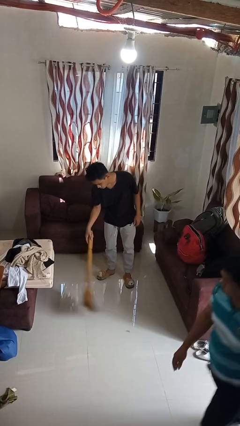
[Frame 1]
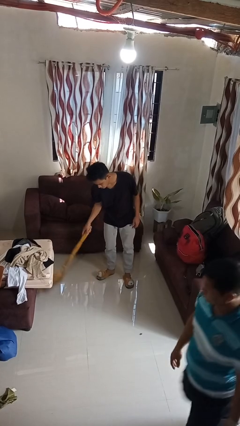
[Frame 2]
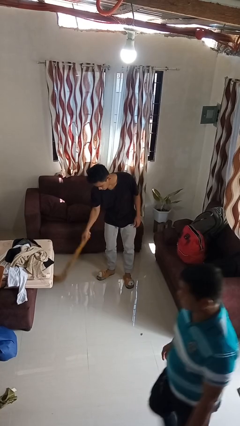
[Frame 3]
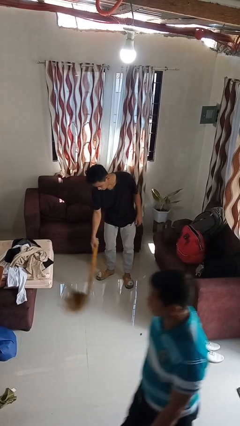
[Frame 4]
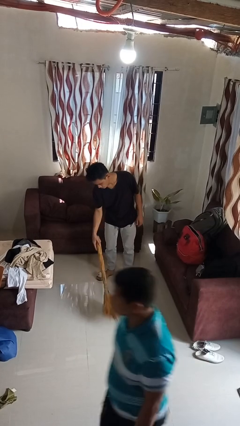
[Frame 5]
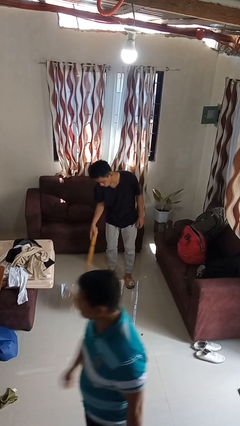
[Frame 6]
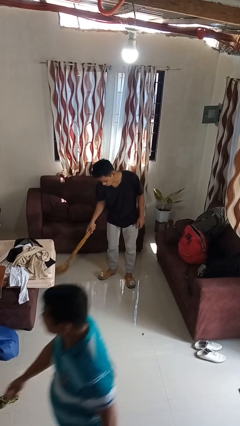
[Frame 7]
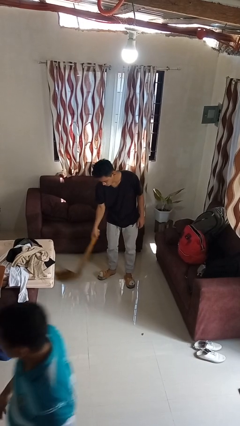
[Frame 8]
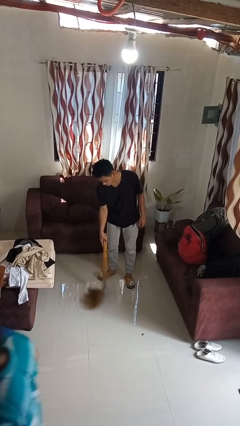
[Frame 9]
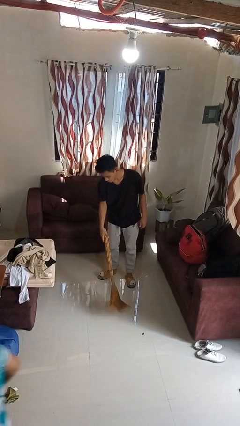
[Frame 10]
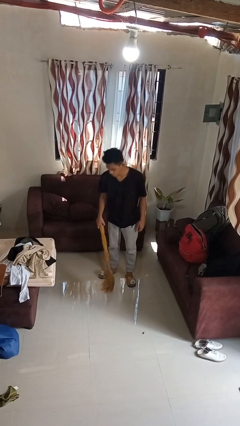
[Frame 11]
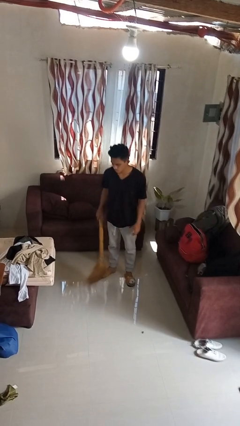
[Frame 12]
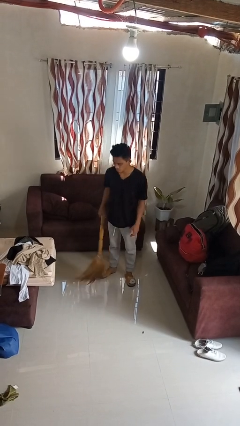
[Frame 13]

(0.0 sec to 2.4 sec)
person sweeps floor

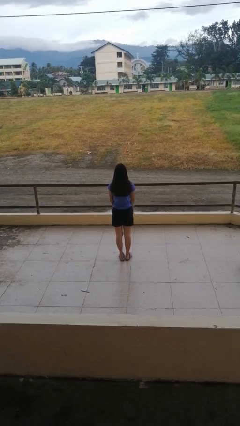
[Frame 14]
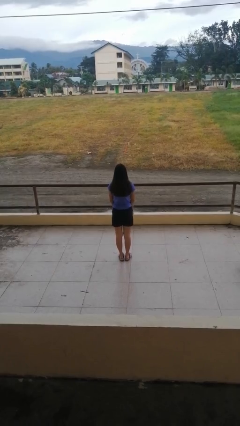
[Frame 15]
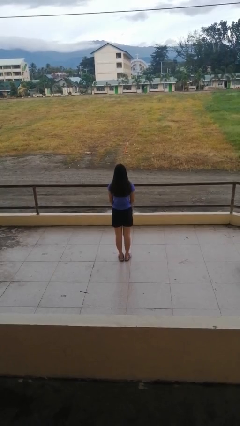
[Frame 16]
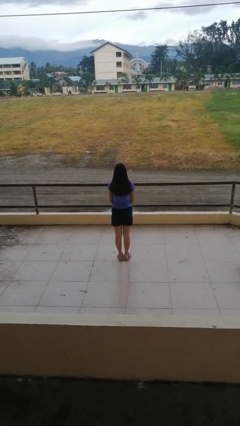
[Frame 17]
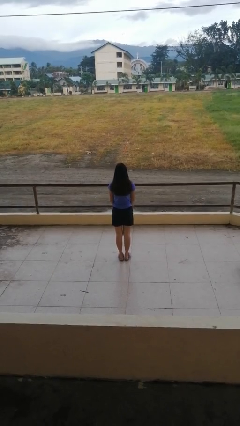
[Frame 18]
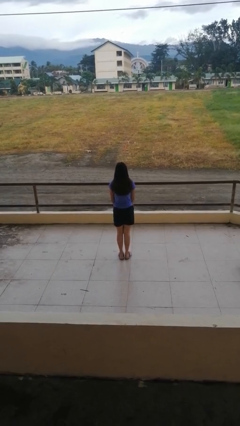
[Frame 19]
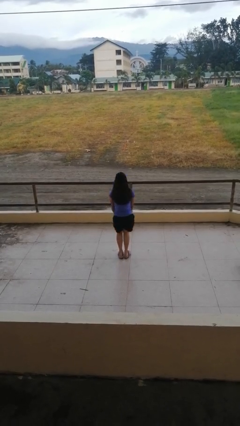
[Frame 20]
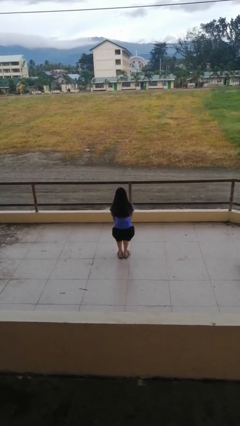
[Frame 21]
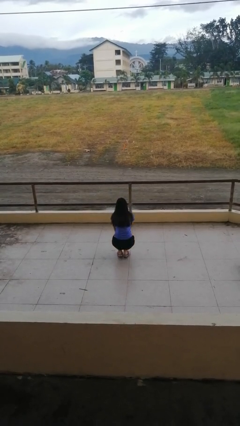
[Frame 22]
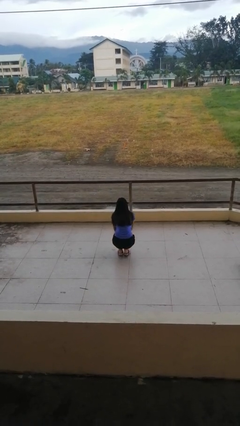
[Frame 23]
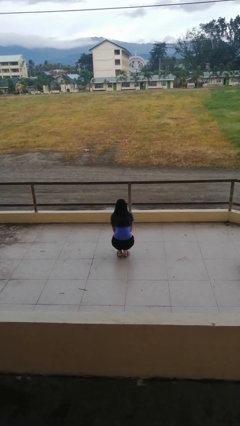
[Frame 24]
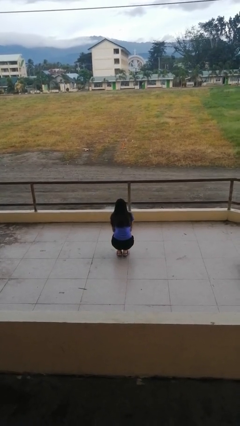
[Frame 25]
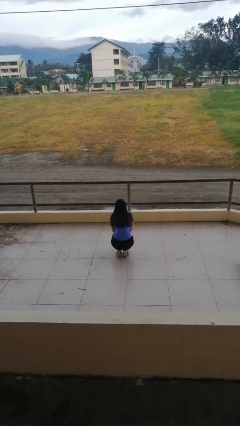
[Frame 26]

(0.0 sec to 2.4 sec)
person squats

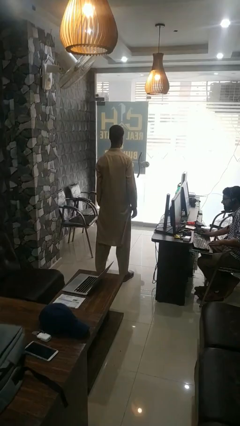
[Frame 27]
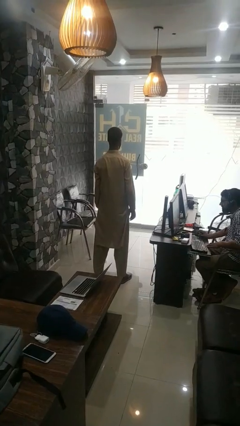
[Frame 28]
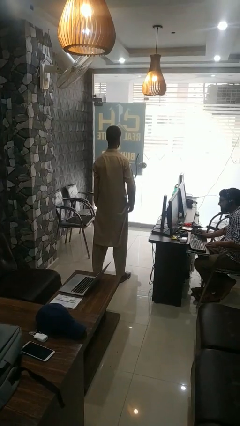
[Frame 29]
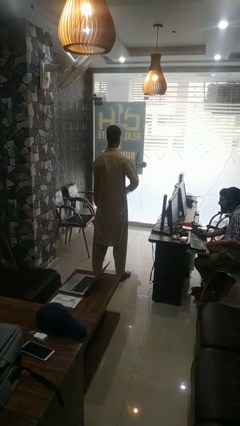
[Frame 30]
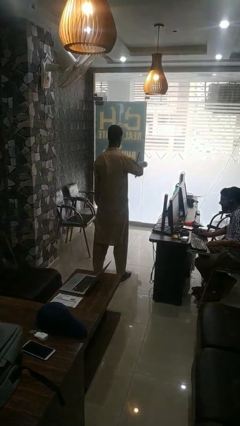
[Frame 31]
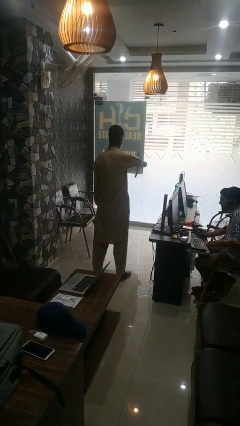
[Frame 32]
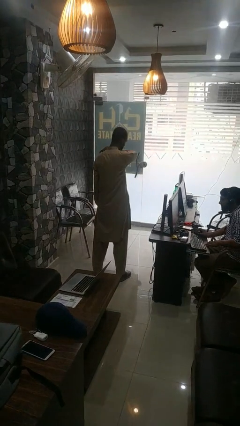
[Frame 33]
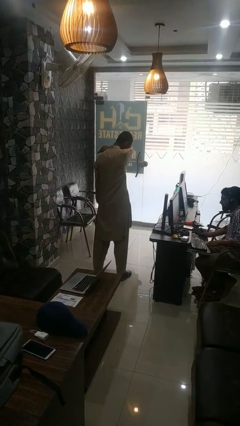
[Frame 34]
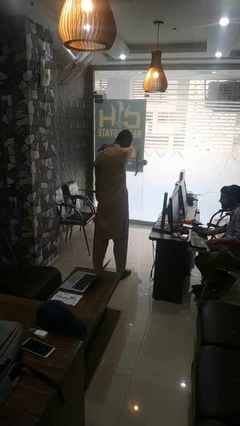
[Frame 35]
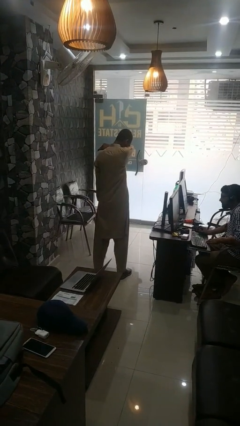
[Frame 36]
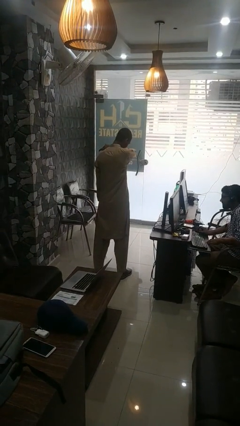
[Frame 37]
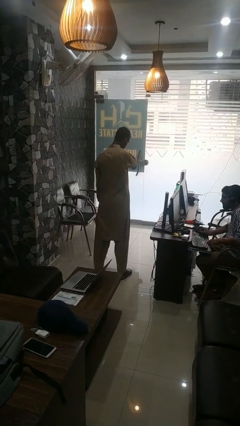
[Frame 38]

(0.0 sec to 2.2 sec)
person sneezes into arm

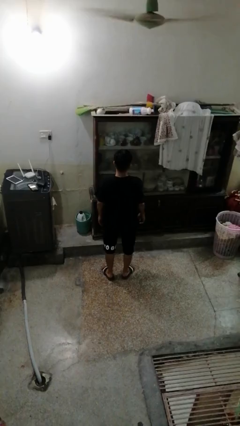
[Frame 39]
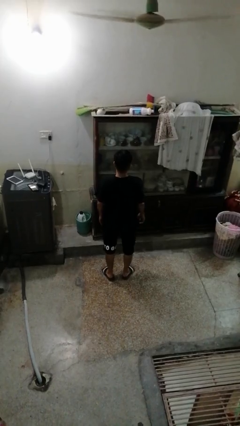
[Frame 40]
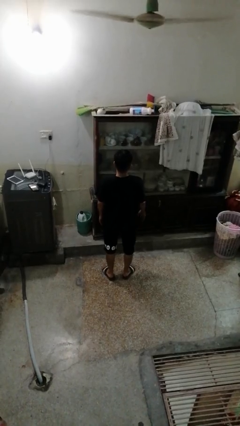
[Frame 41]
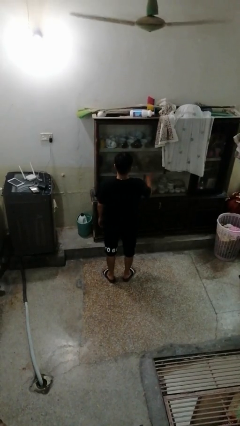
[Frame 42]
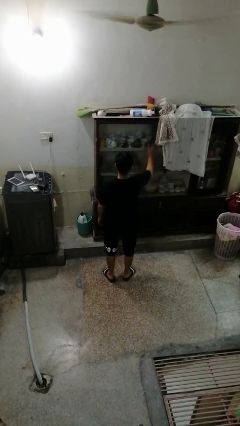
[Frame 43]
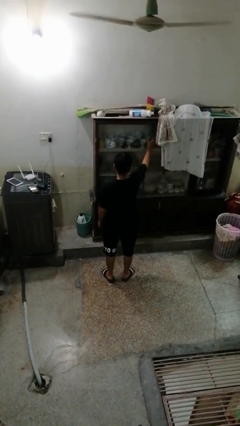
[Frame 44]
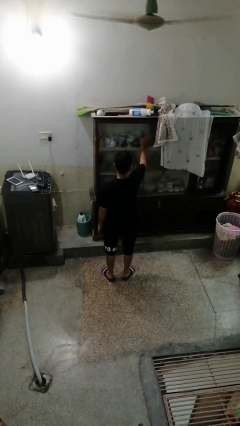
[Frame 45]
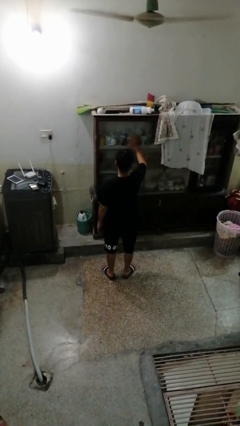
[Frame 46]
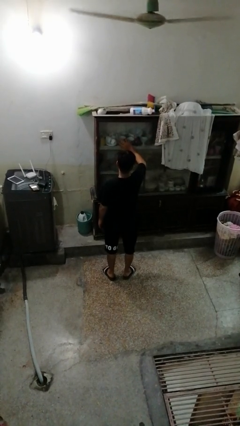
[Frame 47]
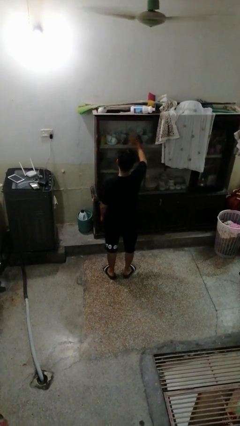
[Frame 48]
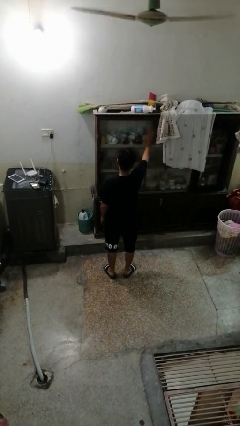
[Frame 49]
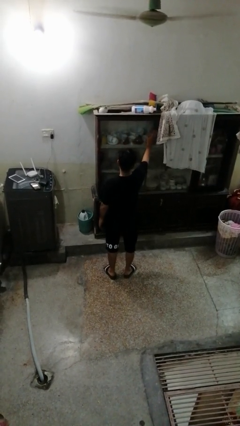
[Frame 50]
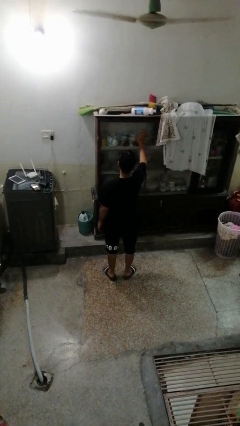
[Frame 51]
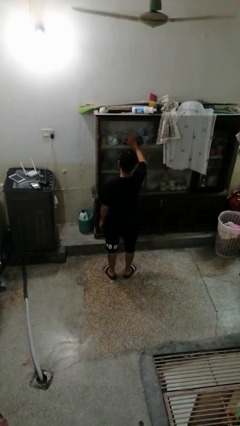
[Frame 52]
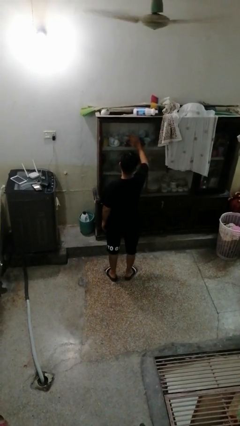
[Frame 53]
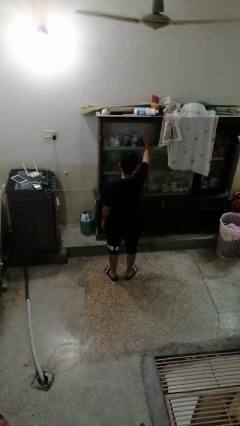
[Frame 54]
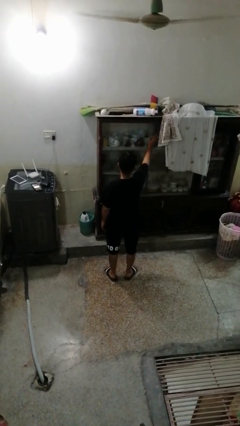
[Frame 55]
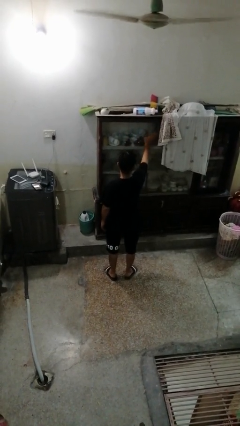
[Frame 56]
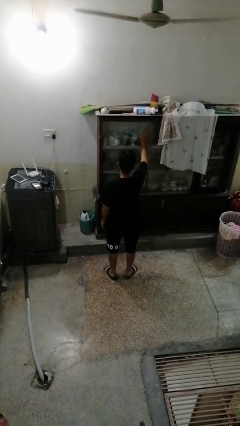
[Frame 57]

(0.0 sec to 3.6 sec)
person waves hand over object

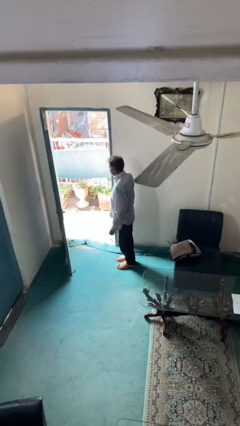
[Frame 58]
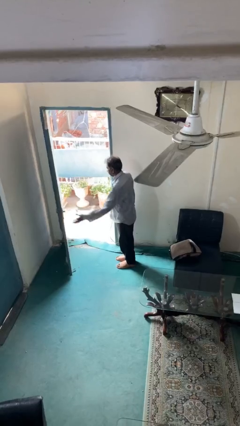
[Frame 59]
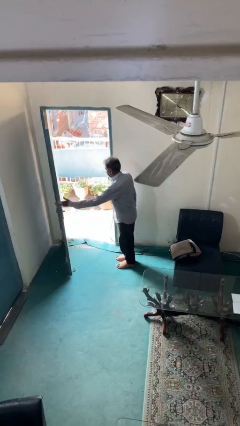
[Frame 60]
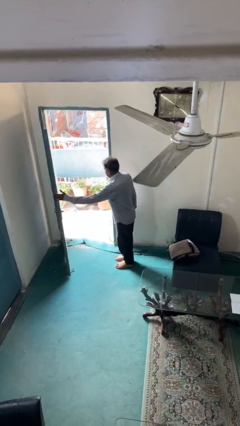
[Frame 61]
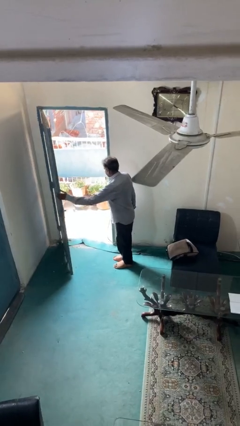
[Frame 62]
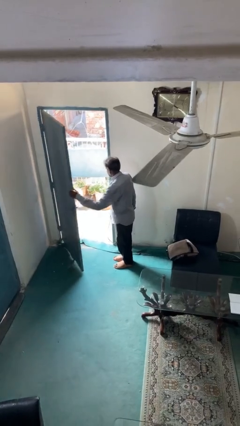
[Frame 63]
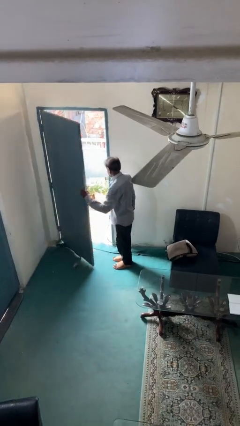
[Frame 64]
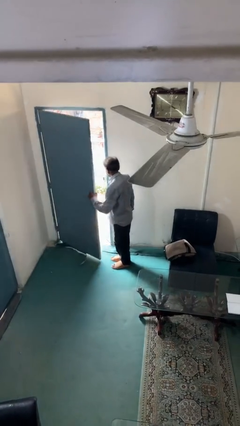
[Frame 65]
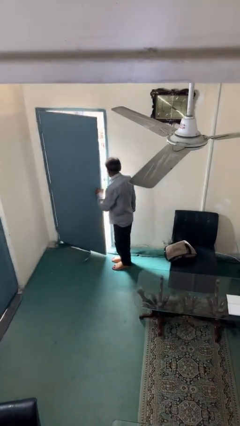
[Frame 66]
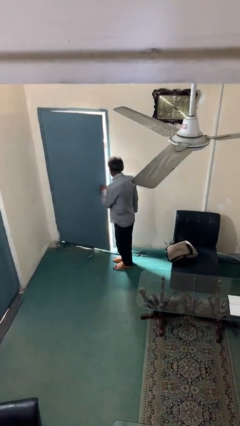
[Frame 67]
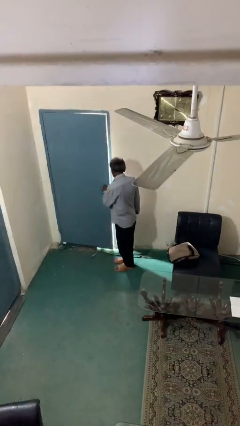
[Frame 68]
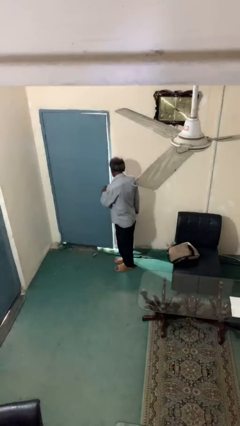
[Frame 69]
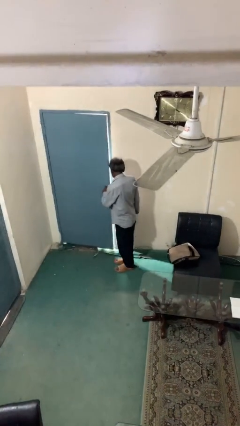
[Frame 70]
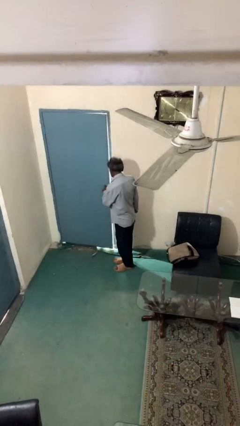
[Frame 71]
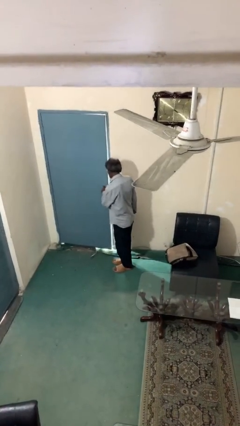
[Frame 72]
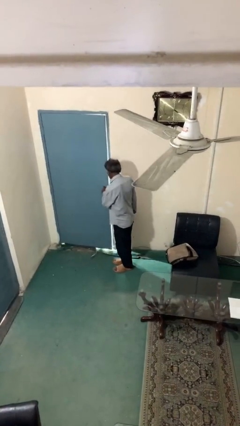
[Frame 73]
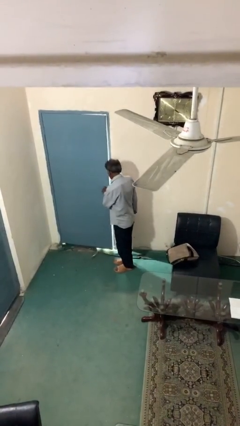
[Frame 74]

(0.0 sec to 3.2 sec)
person closes facility door

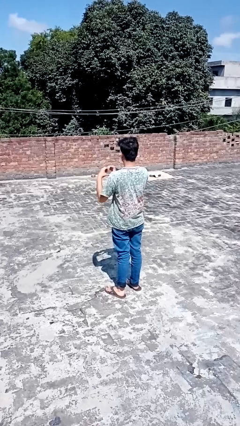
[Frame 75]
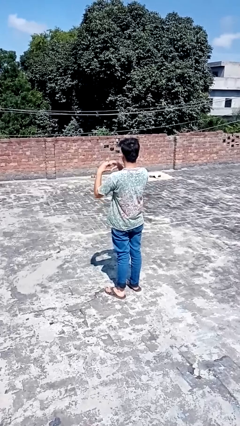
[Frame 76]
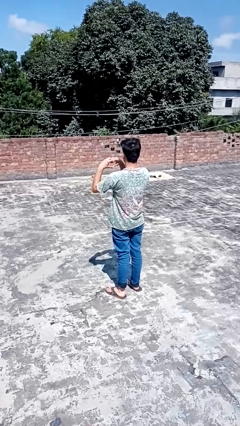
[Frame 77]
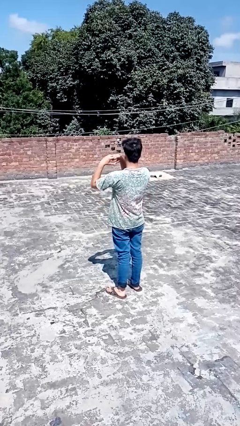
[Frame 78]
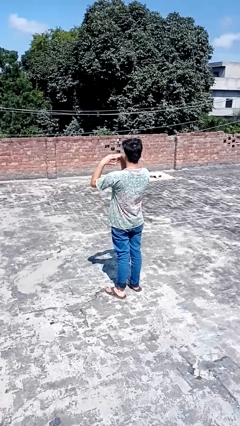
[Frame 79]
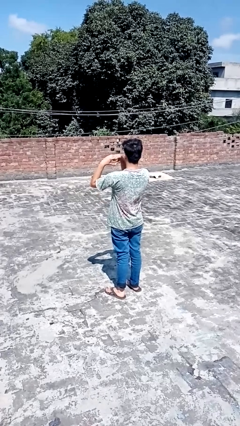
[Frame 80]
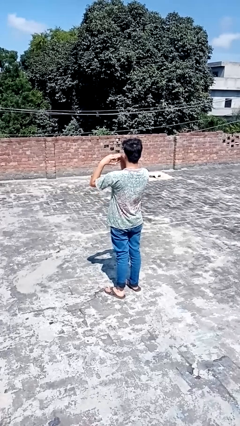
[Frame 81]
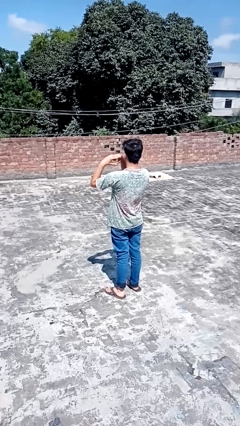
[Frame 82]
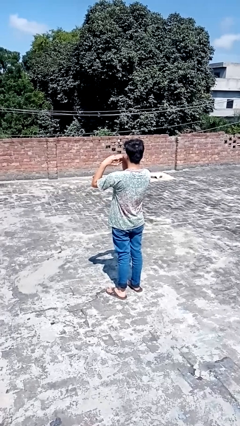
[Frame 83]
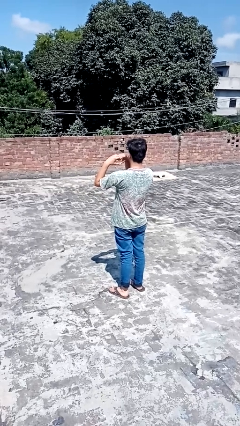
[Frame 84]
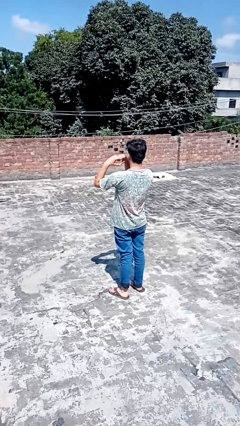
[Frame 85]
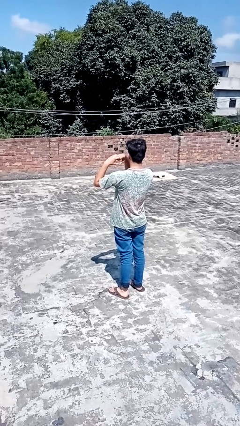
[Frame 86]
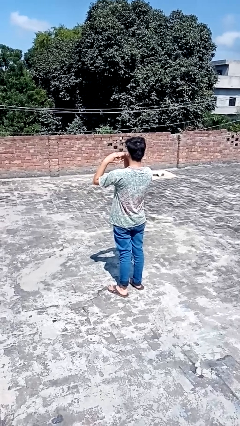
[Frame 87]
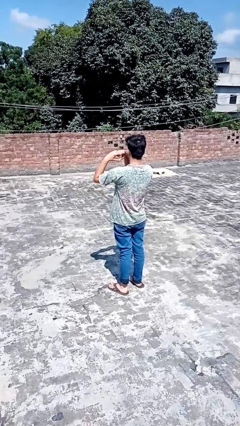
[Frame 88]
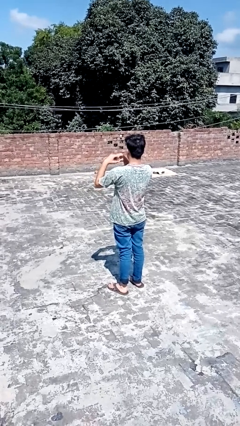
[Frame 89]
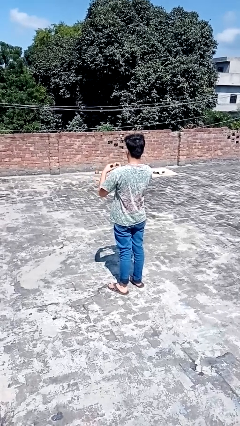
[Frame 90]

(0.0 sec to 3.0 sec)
person gestures heart

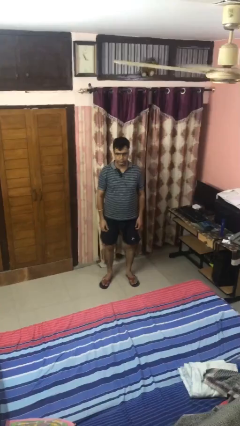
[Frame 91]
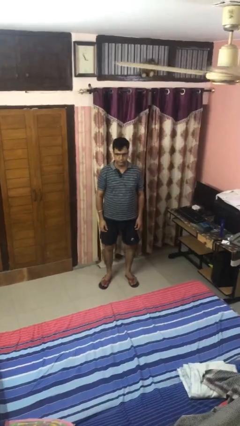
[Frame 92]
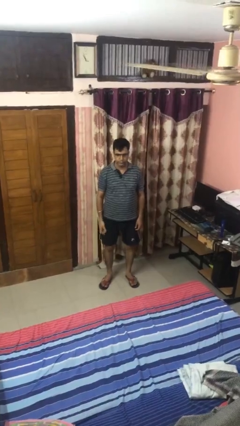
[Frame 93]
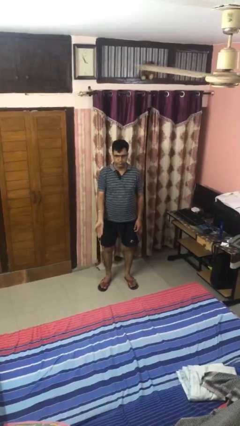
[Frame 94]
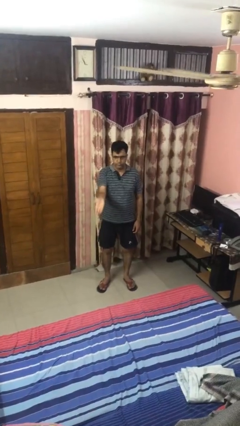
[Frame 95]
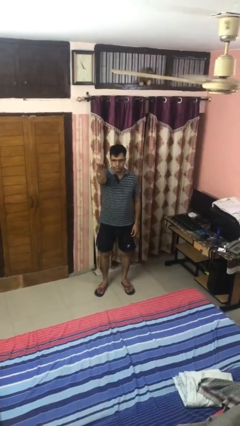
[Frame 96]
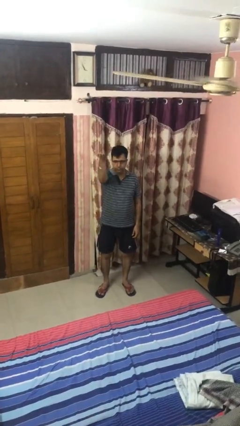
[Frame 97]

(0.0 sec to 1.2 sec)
person gestures swipe up
